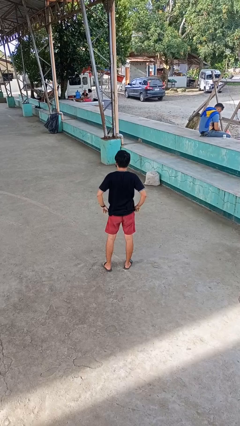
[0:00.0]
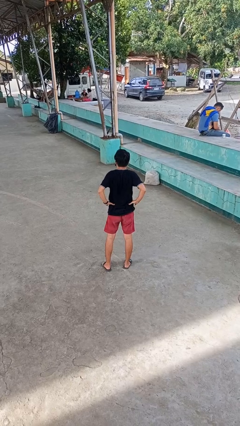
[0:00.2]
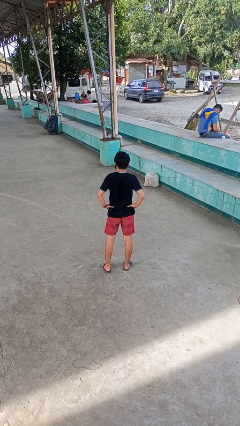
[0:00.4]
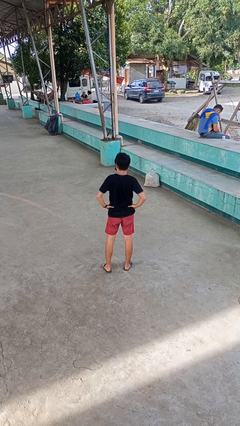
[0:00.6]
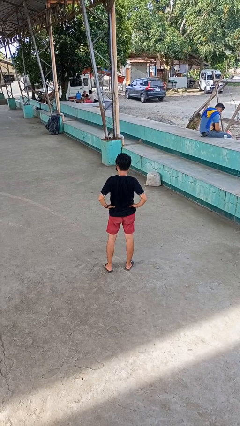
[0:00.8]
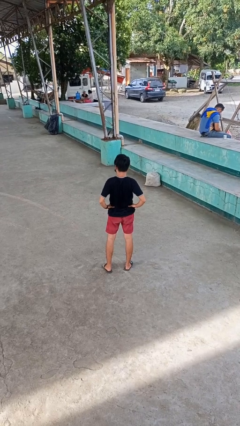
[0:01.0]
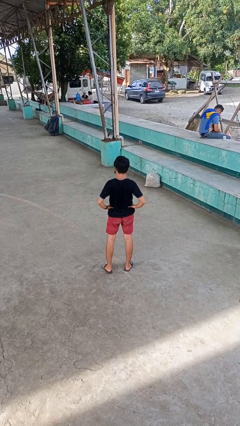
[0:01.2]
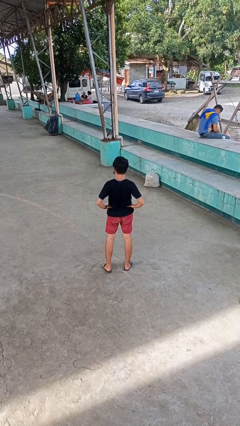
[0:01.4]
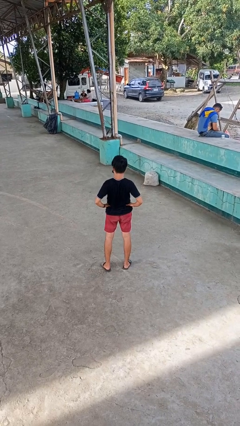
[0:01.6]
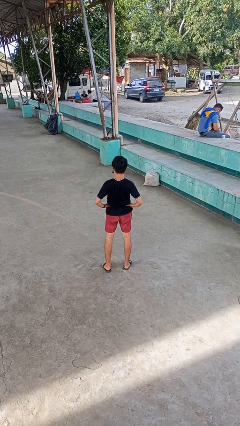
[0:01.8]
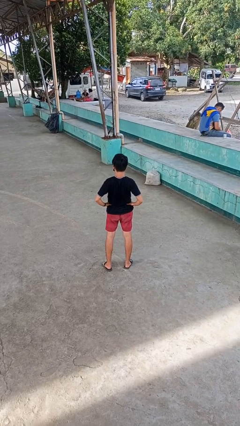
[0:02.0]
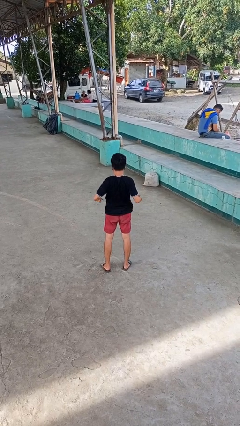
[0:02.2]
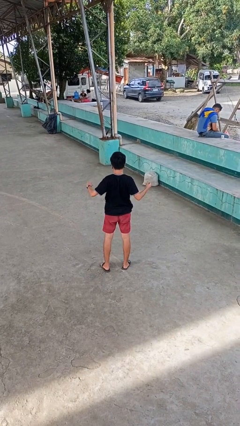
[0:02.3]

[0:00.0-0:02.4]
person stretches back

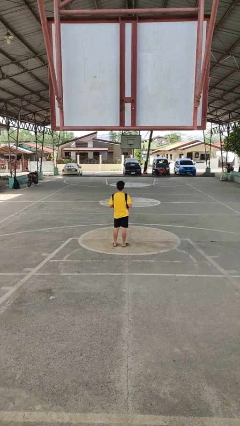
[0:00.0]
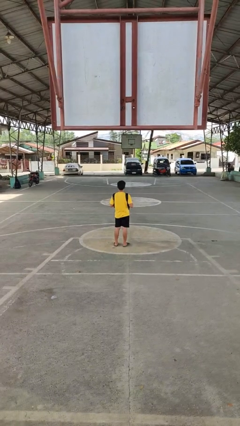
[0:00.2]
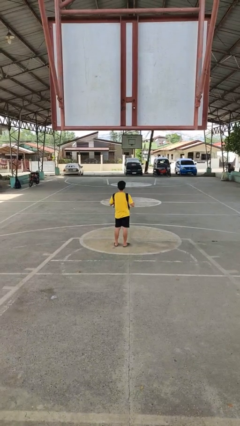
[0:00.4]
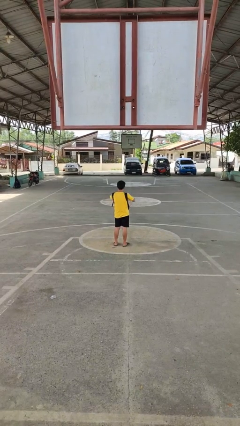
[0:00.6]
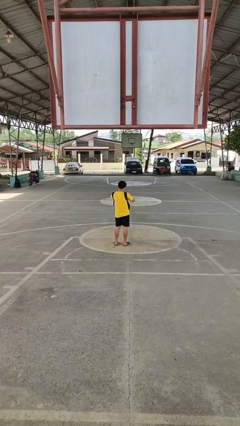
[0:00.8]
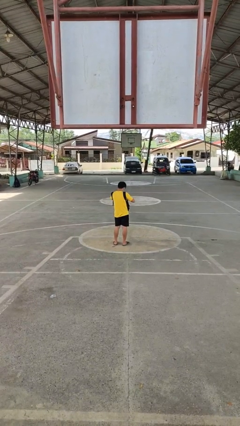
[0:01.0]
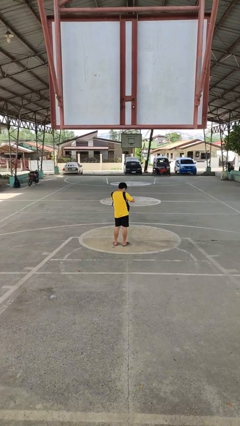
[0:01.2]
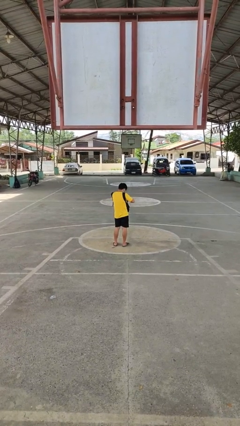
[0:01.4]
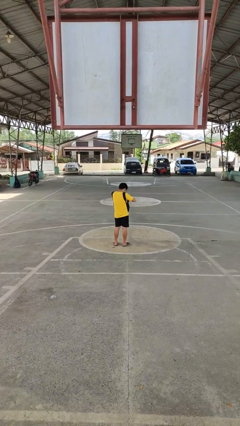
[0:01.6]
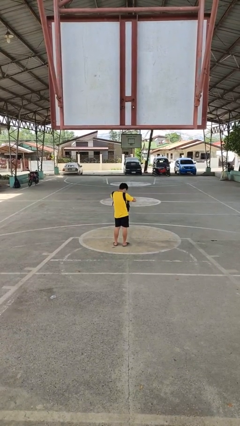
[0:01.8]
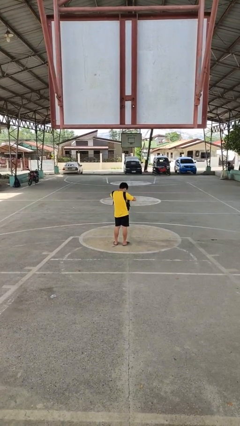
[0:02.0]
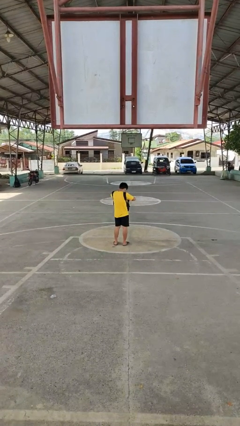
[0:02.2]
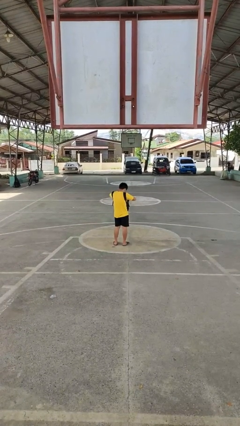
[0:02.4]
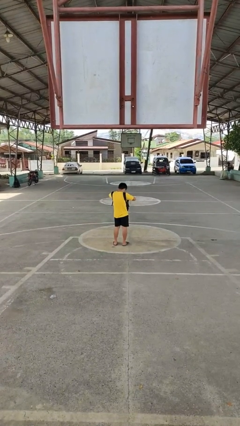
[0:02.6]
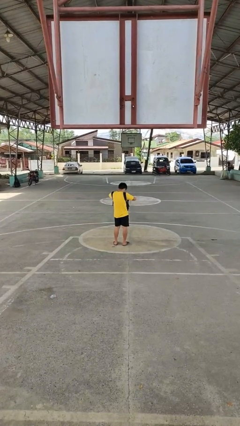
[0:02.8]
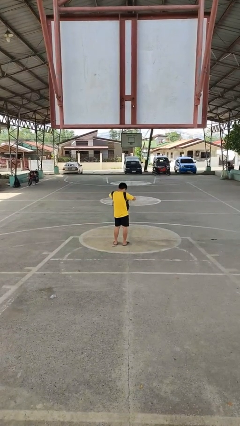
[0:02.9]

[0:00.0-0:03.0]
person searches in backpack

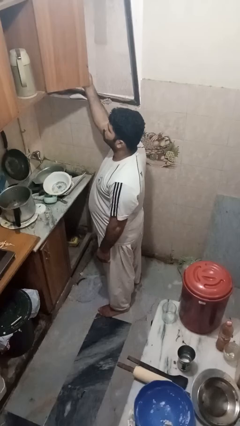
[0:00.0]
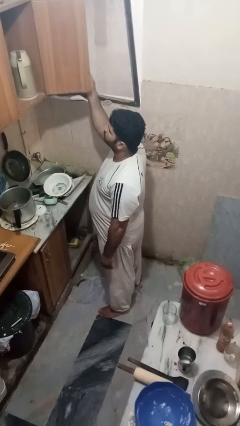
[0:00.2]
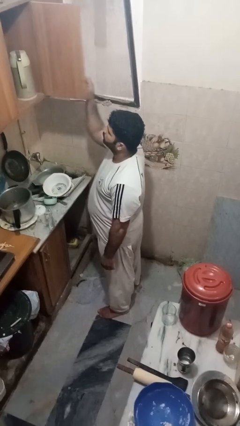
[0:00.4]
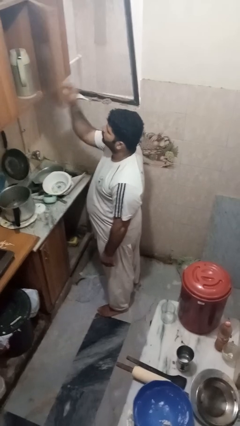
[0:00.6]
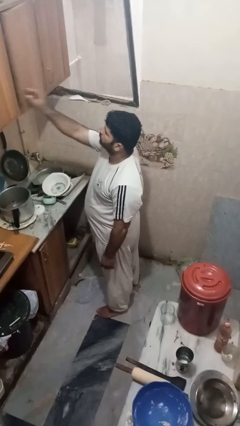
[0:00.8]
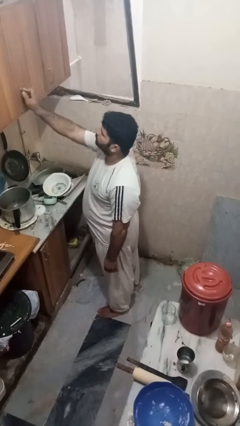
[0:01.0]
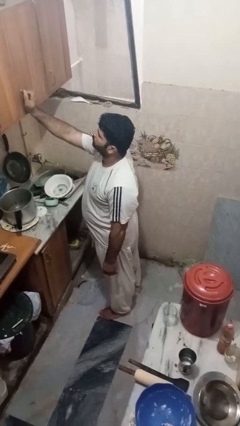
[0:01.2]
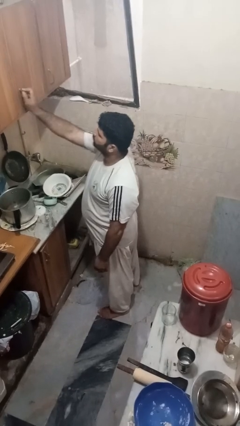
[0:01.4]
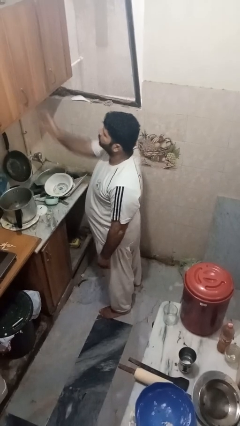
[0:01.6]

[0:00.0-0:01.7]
person closes cabinet

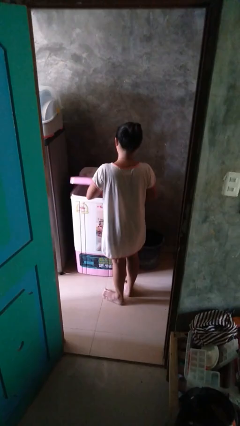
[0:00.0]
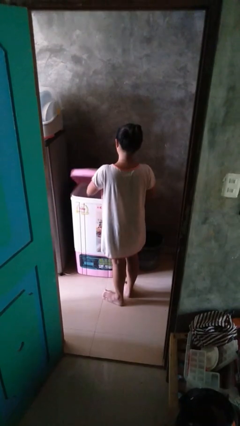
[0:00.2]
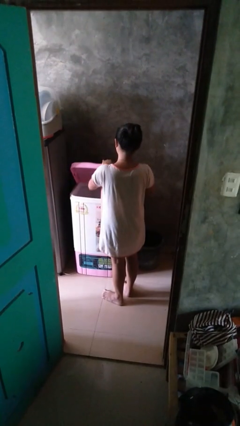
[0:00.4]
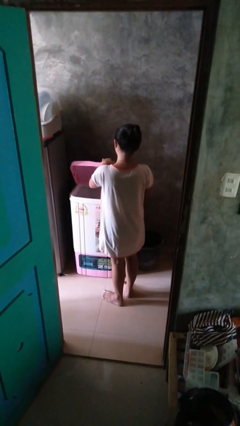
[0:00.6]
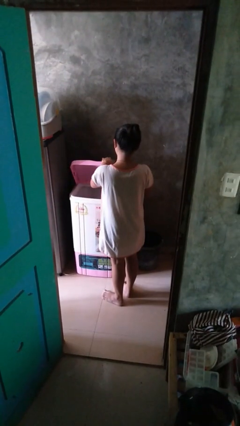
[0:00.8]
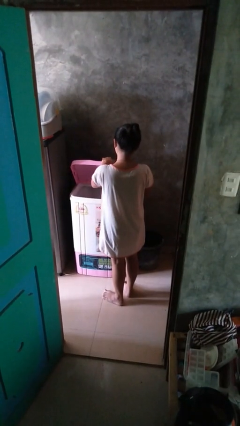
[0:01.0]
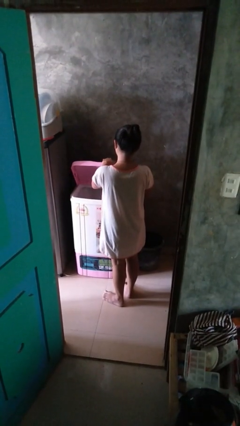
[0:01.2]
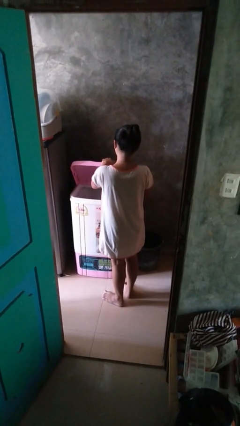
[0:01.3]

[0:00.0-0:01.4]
person opens clothes washer

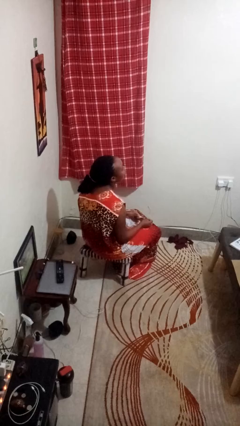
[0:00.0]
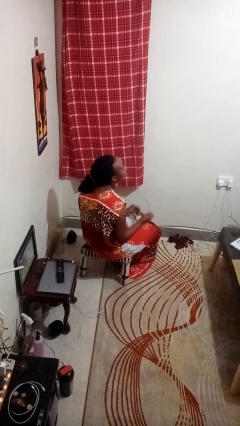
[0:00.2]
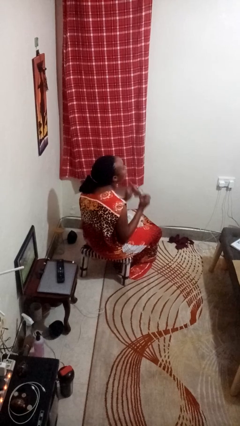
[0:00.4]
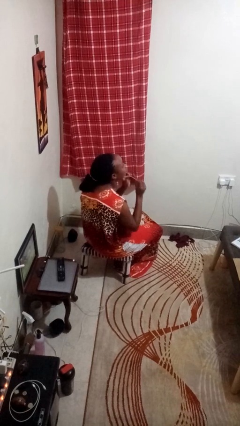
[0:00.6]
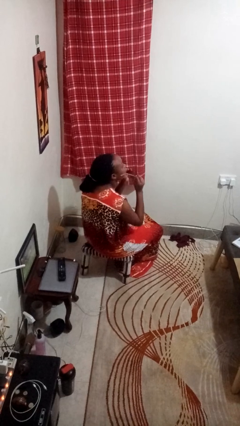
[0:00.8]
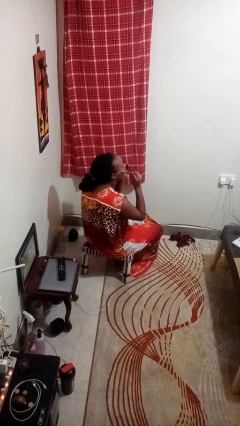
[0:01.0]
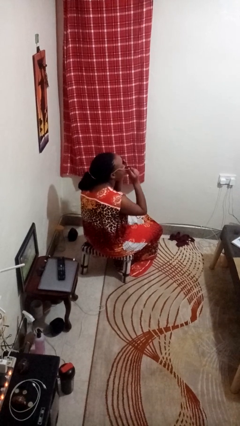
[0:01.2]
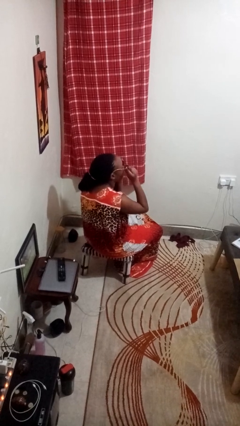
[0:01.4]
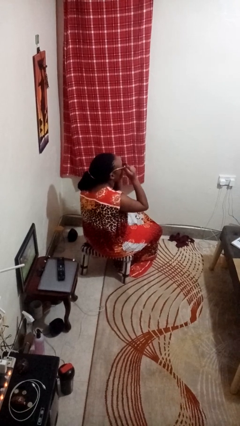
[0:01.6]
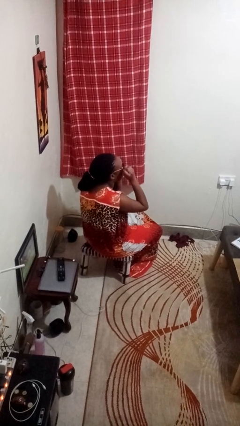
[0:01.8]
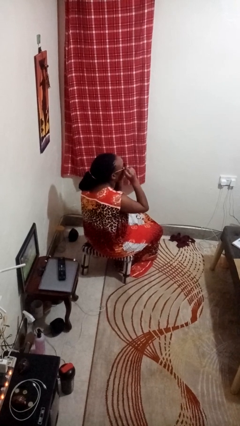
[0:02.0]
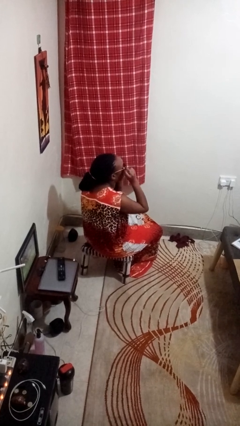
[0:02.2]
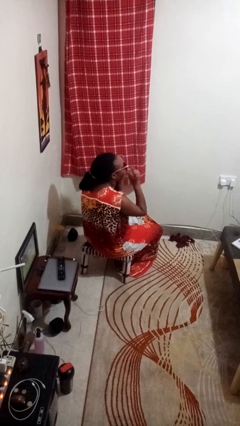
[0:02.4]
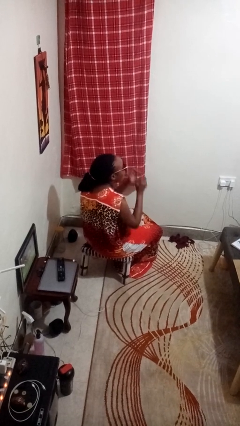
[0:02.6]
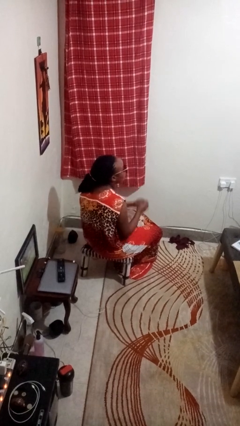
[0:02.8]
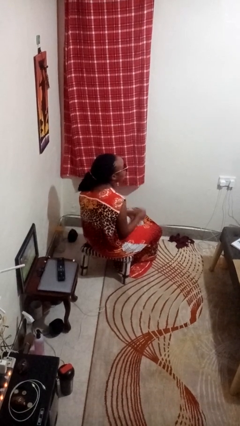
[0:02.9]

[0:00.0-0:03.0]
person puts on sunglasses

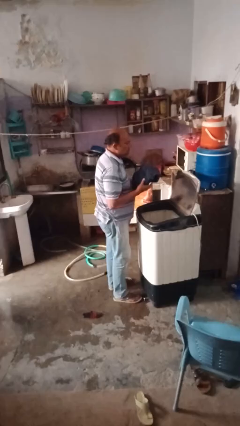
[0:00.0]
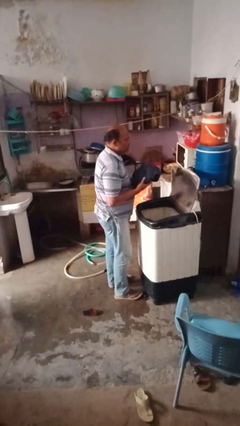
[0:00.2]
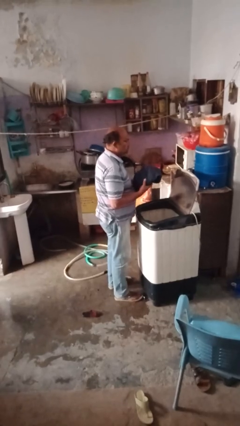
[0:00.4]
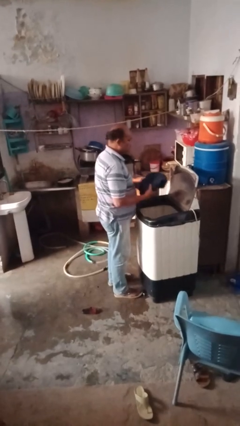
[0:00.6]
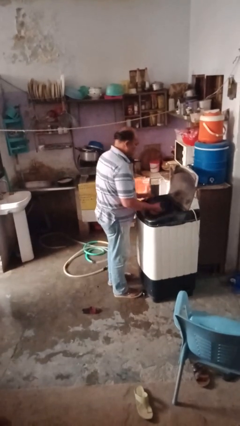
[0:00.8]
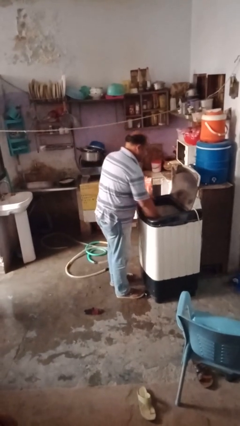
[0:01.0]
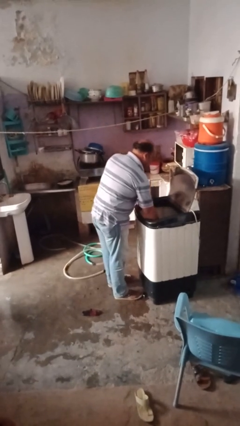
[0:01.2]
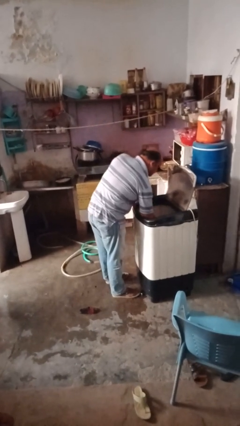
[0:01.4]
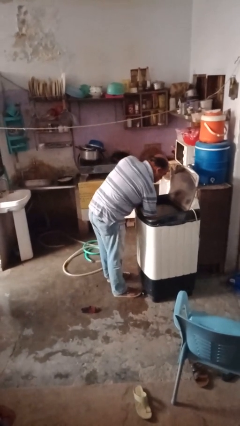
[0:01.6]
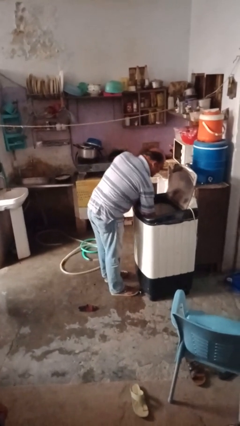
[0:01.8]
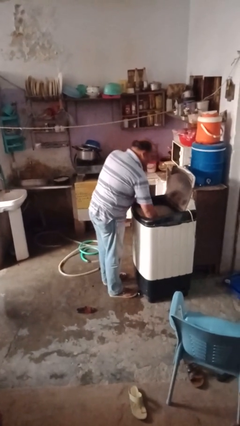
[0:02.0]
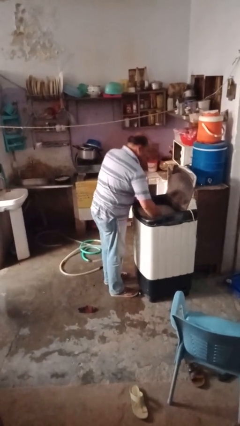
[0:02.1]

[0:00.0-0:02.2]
person loads clotheswasher

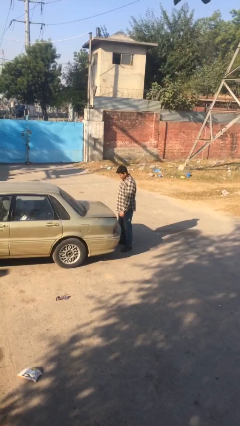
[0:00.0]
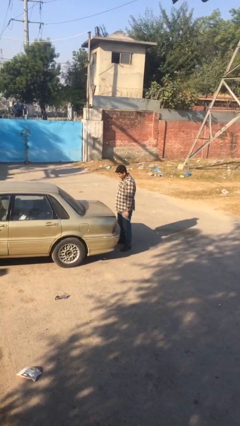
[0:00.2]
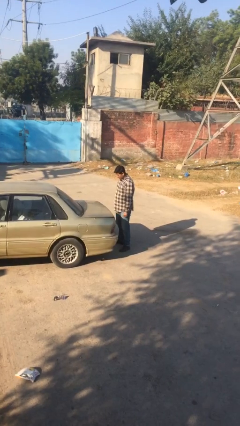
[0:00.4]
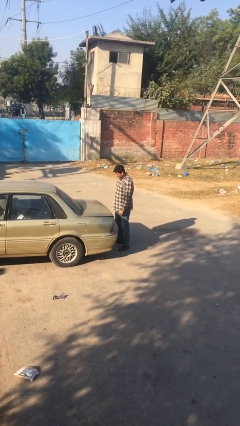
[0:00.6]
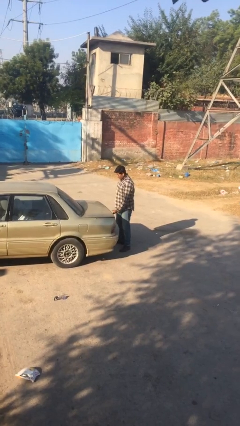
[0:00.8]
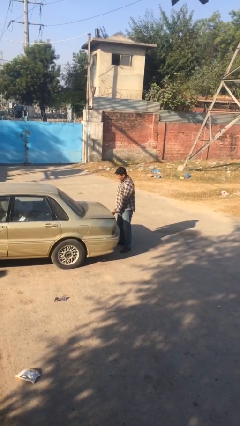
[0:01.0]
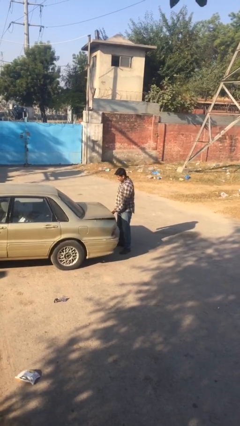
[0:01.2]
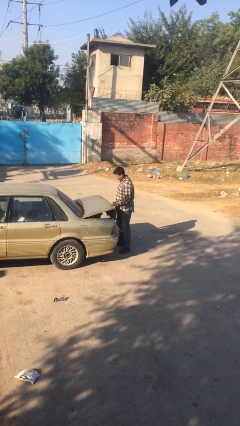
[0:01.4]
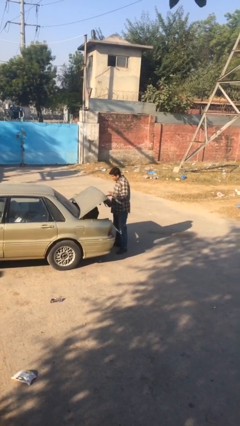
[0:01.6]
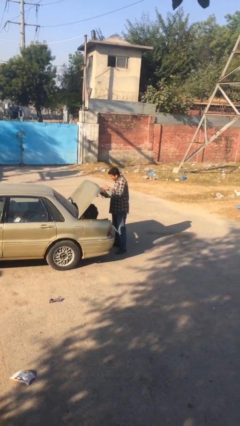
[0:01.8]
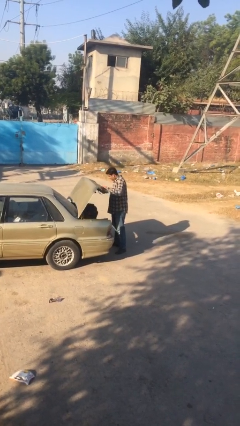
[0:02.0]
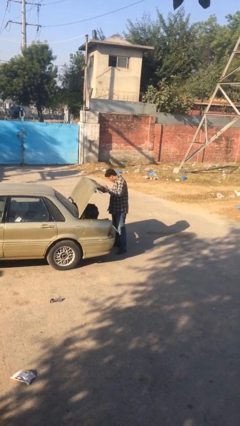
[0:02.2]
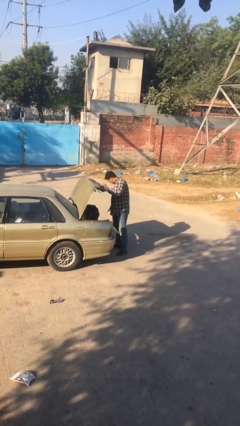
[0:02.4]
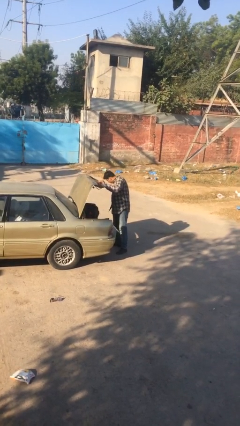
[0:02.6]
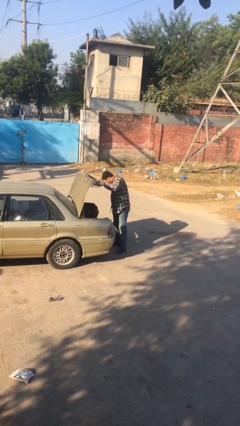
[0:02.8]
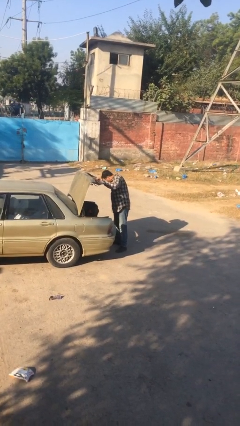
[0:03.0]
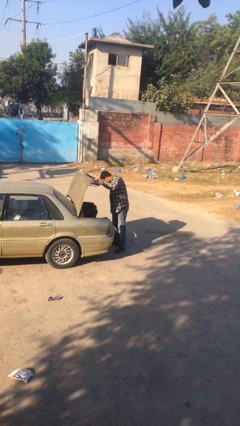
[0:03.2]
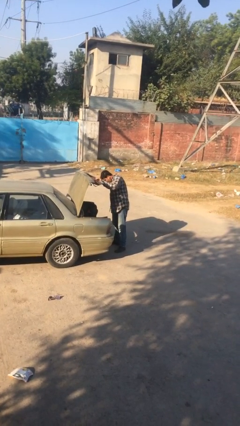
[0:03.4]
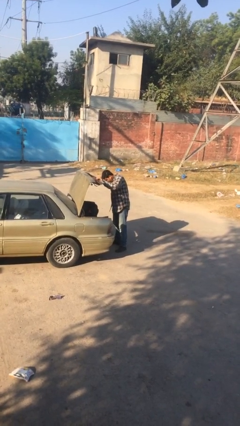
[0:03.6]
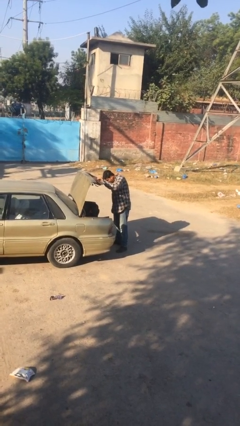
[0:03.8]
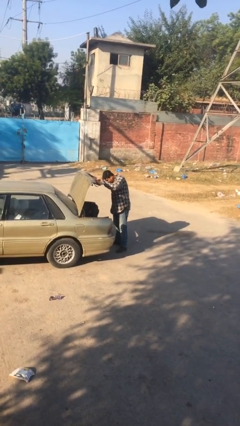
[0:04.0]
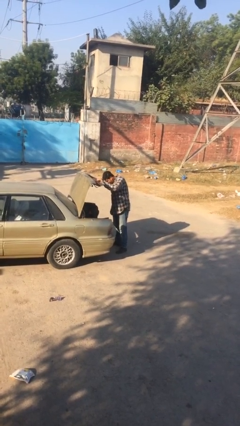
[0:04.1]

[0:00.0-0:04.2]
person opens car trunk
